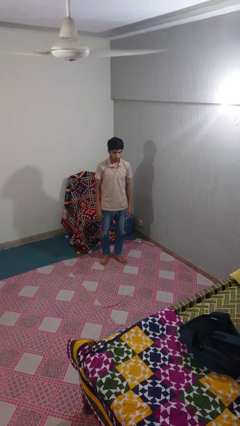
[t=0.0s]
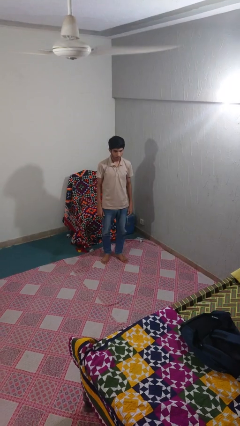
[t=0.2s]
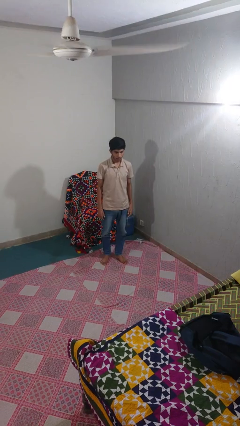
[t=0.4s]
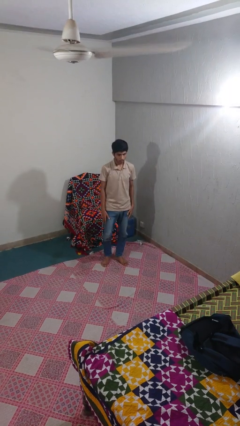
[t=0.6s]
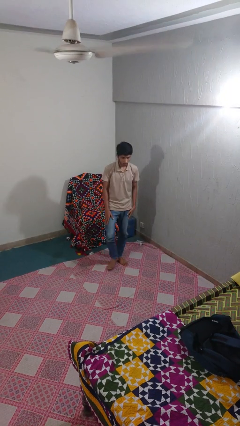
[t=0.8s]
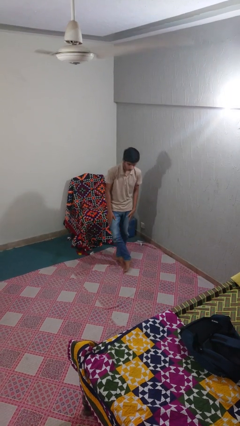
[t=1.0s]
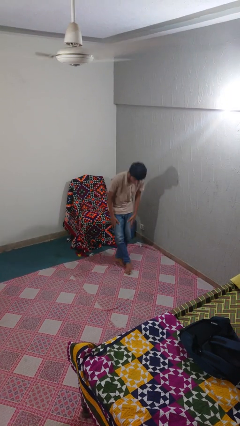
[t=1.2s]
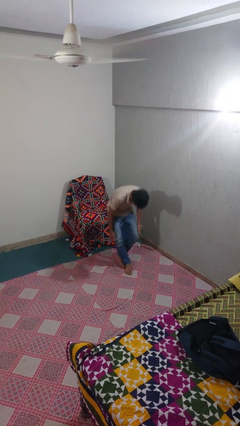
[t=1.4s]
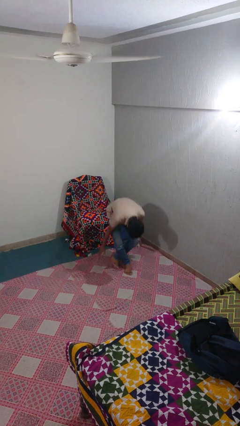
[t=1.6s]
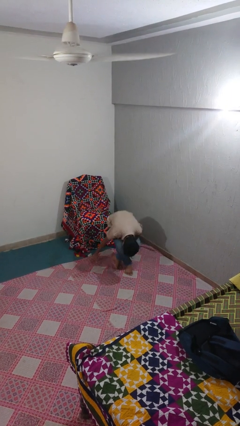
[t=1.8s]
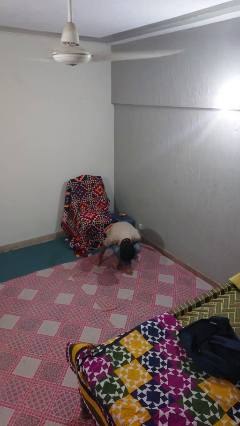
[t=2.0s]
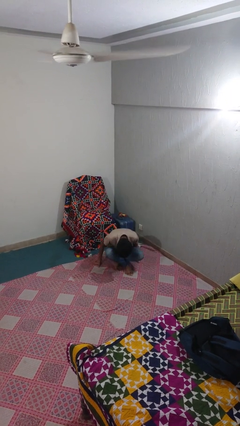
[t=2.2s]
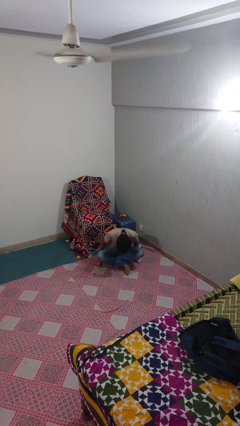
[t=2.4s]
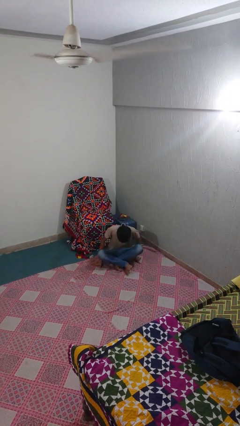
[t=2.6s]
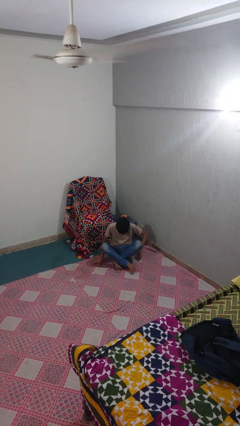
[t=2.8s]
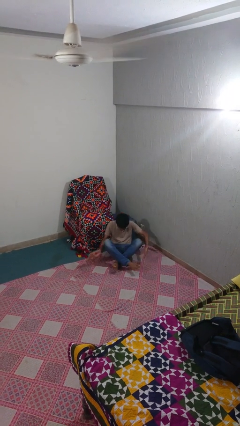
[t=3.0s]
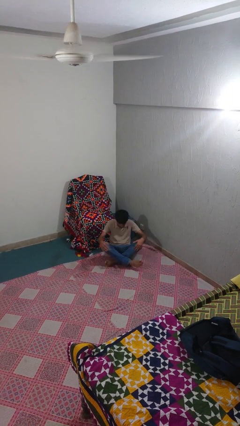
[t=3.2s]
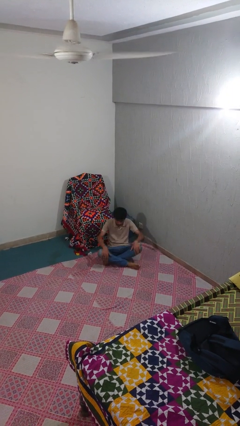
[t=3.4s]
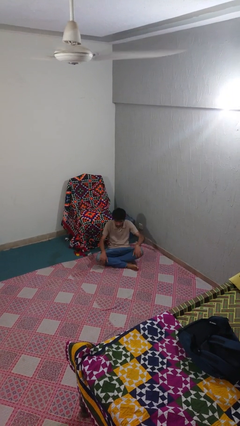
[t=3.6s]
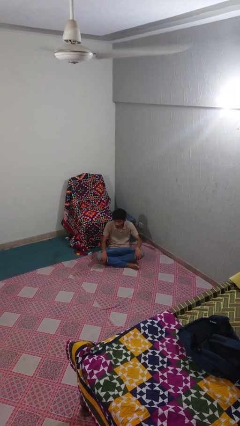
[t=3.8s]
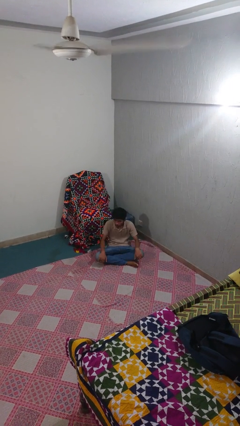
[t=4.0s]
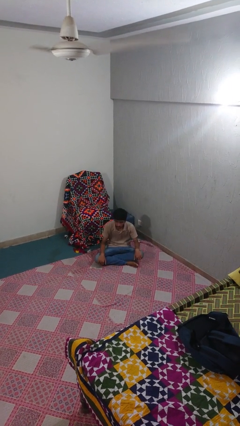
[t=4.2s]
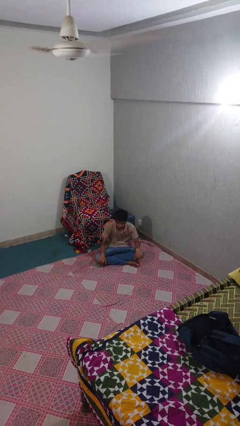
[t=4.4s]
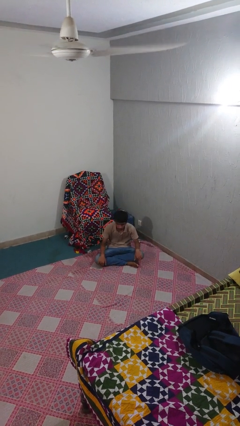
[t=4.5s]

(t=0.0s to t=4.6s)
person sits crisscross

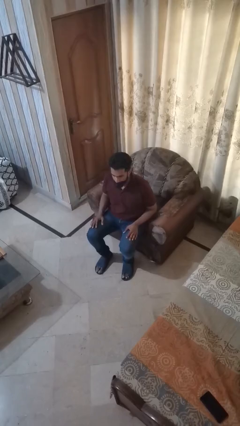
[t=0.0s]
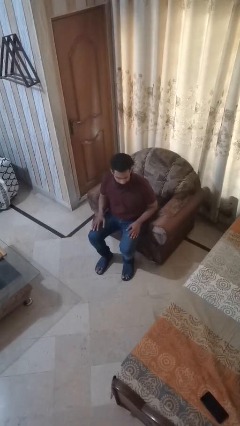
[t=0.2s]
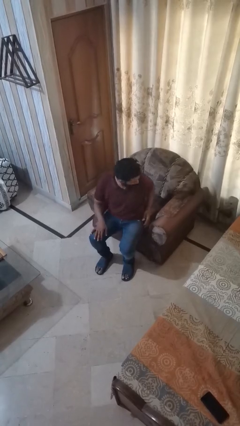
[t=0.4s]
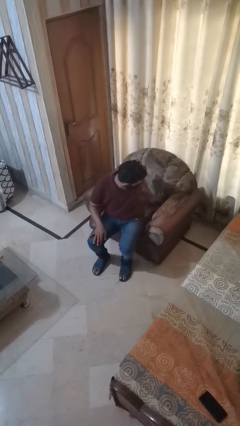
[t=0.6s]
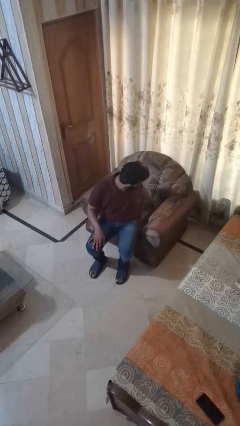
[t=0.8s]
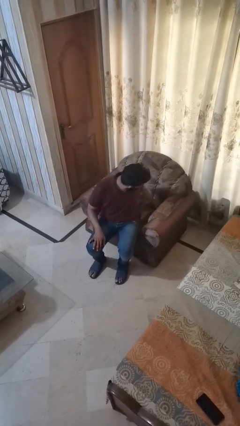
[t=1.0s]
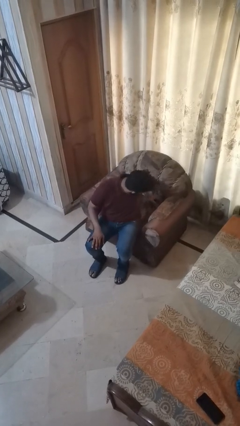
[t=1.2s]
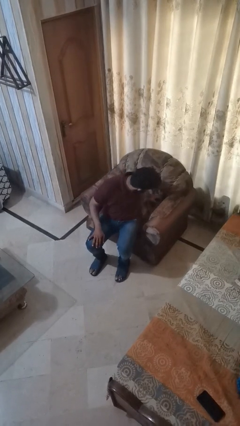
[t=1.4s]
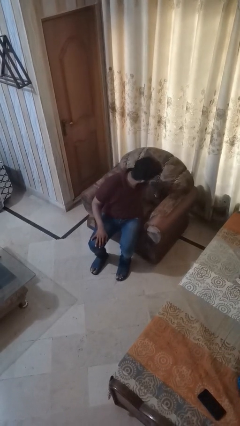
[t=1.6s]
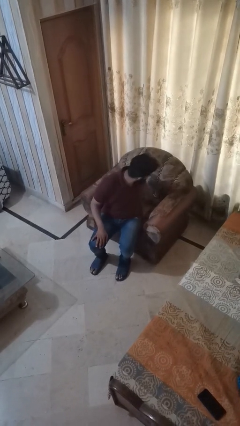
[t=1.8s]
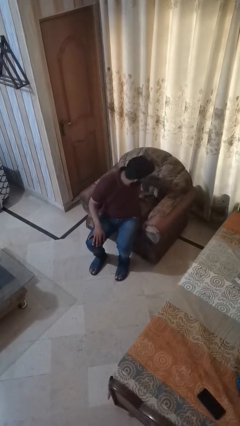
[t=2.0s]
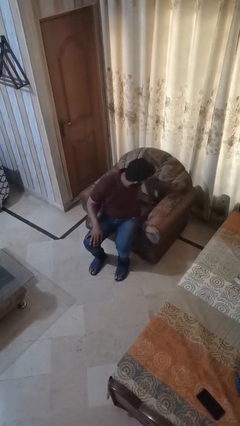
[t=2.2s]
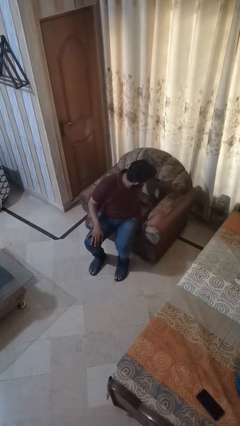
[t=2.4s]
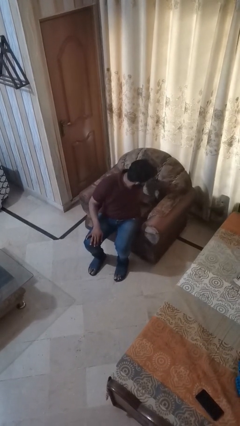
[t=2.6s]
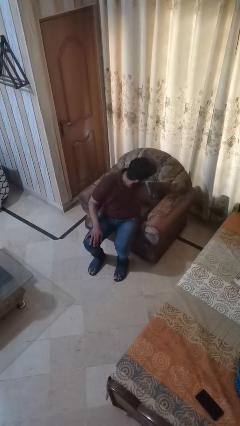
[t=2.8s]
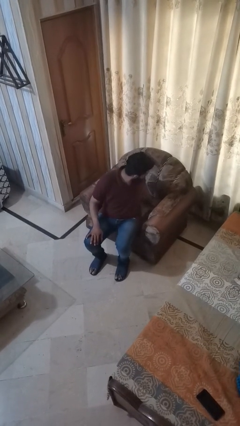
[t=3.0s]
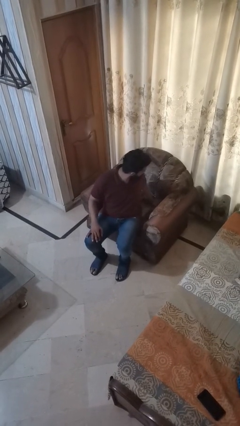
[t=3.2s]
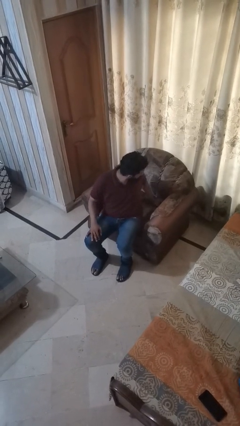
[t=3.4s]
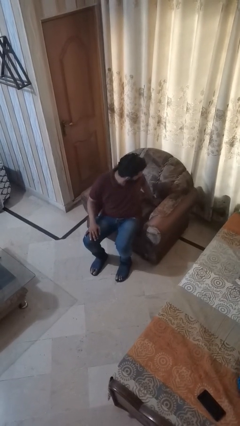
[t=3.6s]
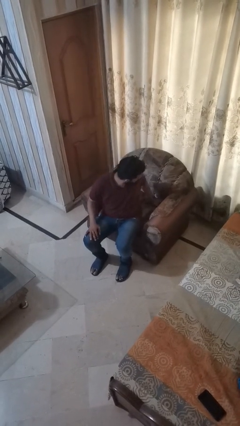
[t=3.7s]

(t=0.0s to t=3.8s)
person searches under couch

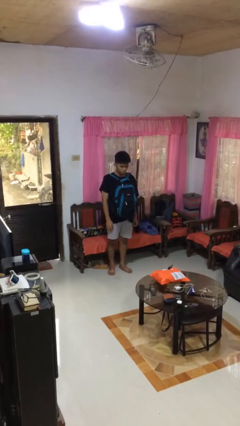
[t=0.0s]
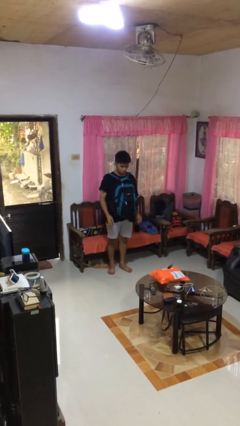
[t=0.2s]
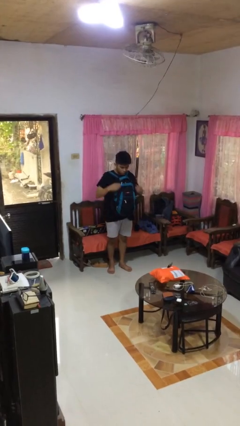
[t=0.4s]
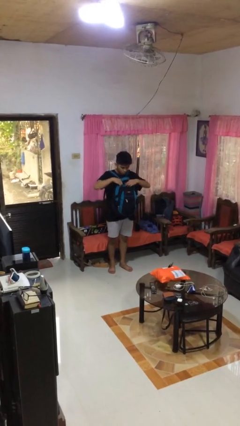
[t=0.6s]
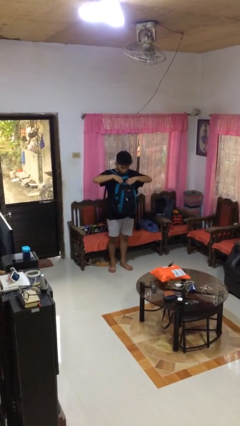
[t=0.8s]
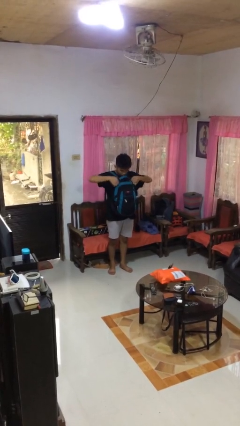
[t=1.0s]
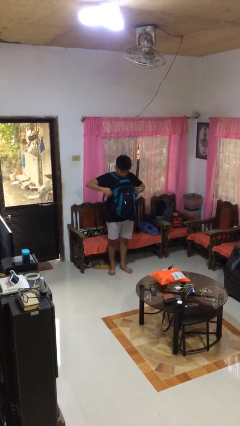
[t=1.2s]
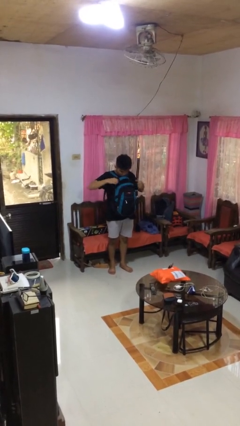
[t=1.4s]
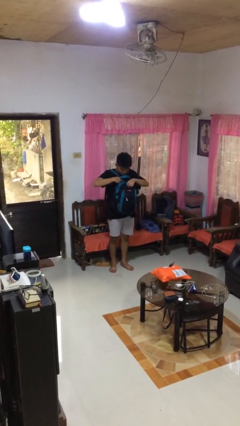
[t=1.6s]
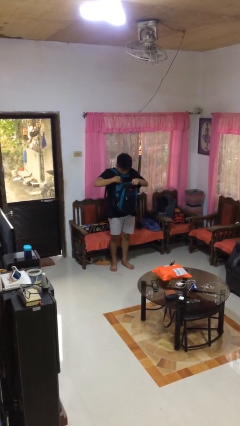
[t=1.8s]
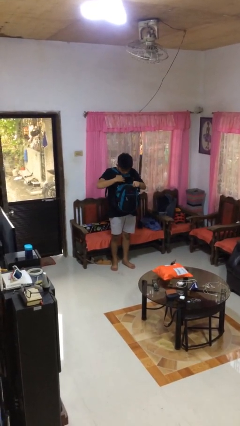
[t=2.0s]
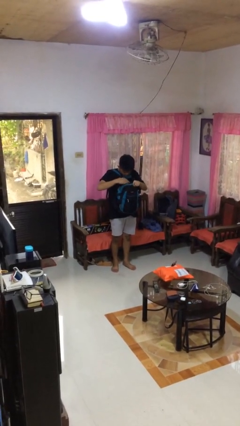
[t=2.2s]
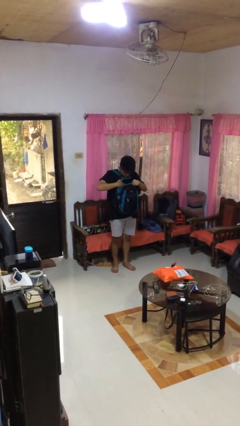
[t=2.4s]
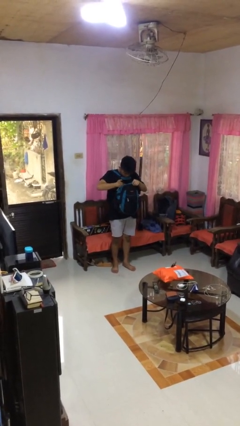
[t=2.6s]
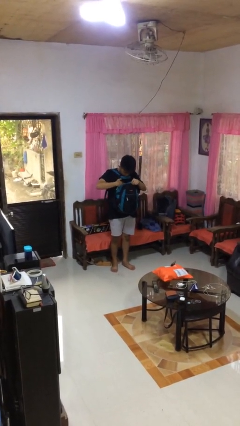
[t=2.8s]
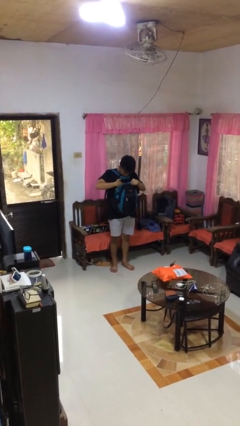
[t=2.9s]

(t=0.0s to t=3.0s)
person searches in backpack

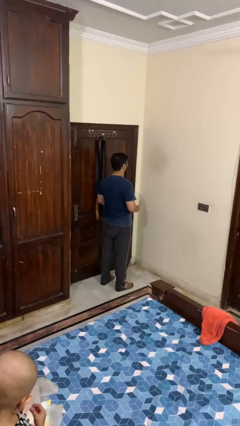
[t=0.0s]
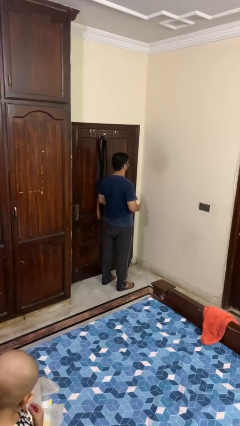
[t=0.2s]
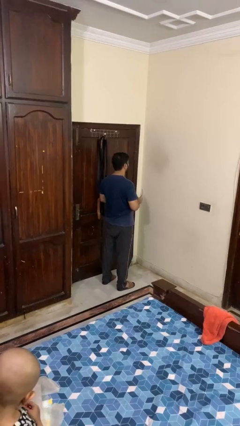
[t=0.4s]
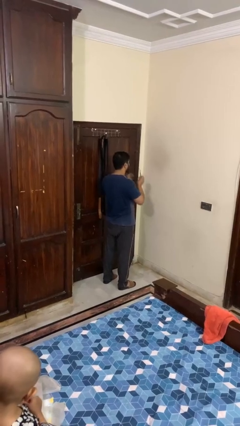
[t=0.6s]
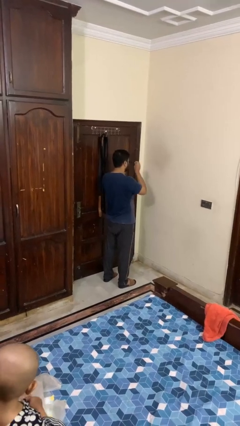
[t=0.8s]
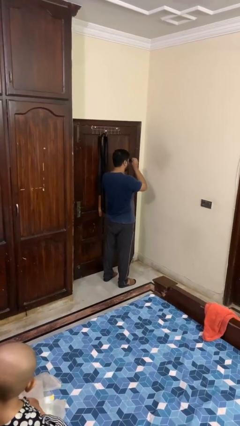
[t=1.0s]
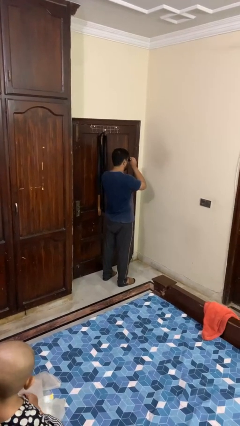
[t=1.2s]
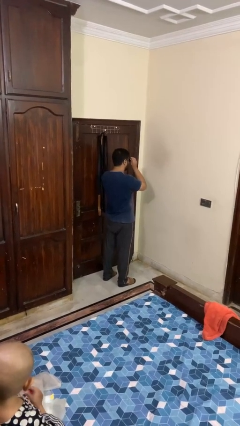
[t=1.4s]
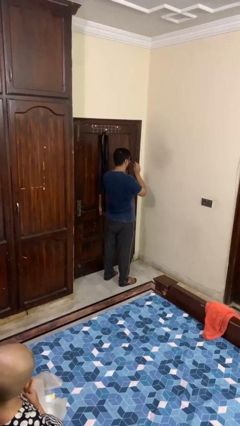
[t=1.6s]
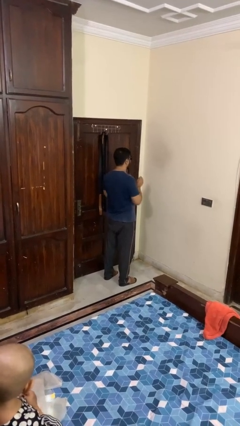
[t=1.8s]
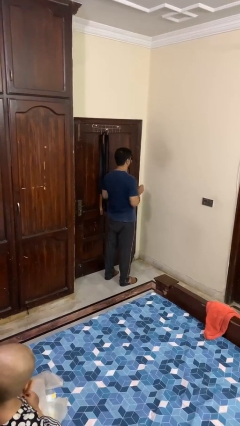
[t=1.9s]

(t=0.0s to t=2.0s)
person puts on sunglasses

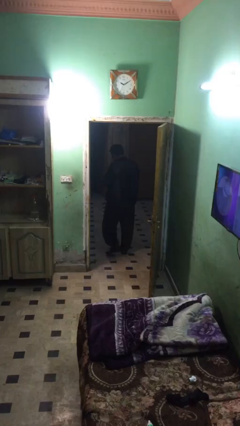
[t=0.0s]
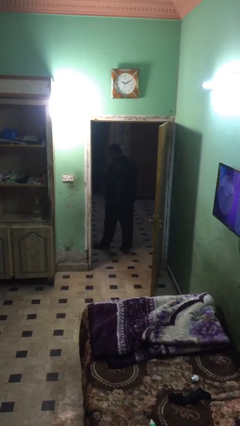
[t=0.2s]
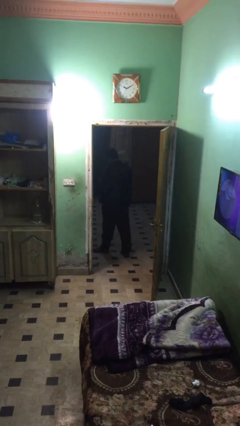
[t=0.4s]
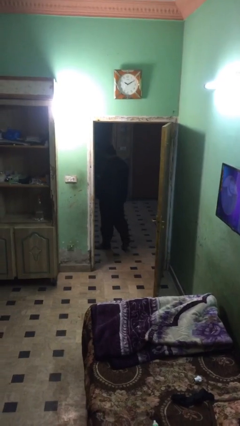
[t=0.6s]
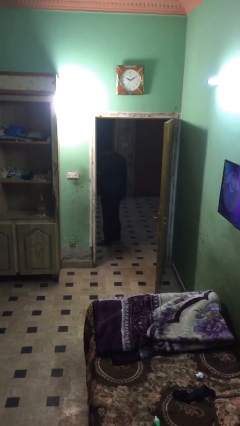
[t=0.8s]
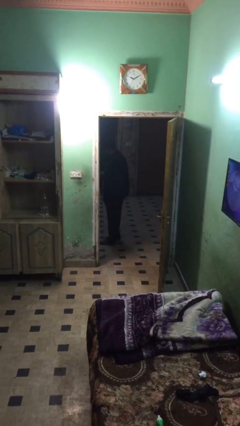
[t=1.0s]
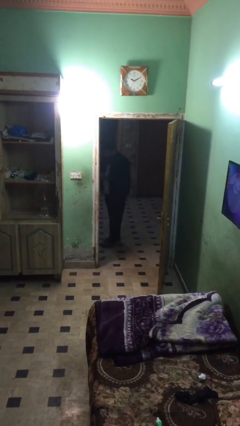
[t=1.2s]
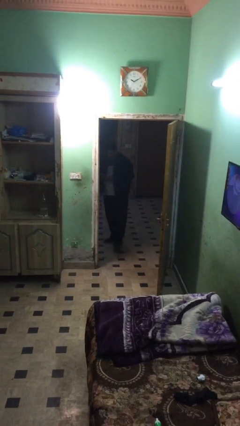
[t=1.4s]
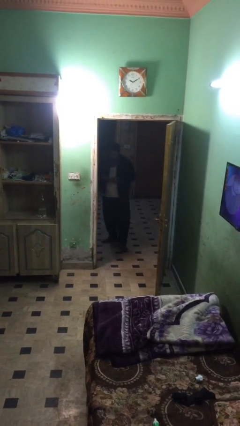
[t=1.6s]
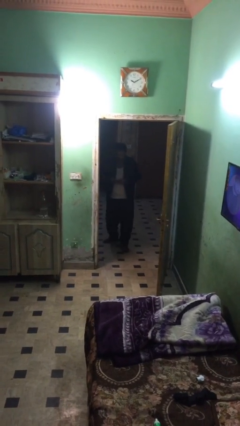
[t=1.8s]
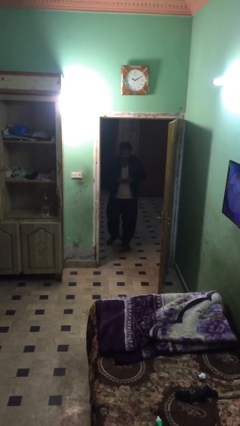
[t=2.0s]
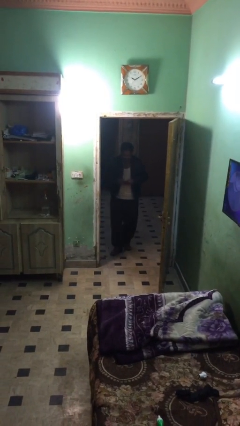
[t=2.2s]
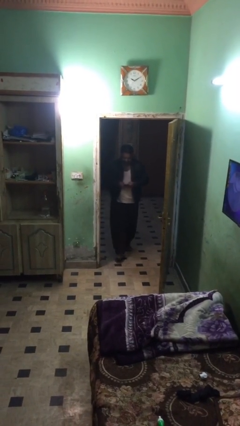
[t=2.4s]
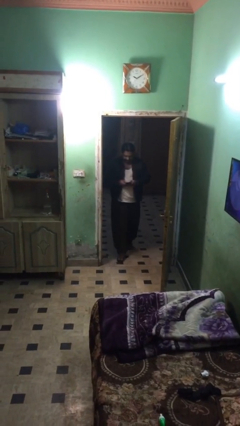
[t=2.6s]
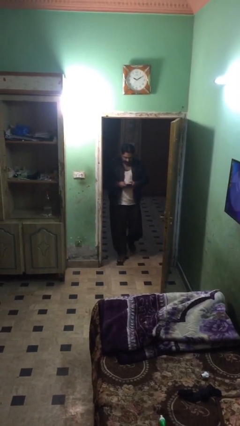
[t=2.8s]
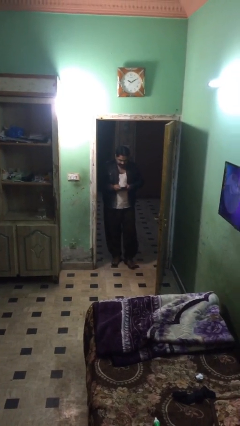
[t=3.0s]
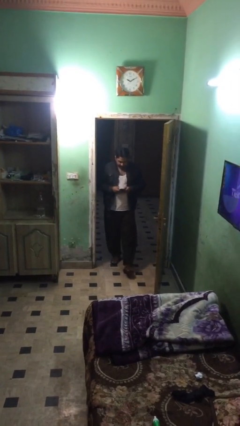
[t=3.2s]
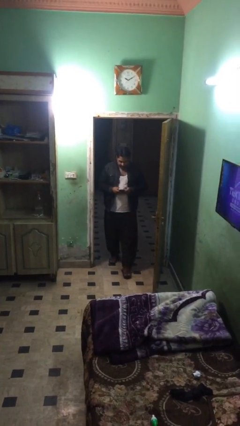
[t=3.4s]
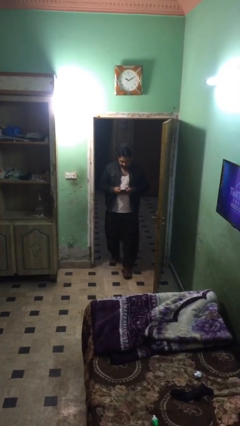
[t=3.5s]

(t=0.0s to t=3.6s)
person enters scene through structure

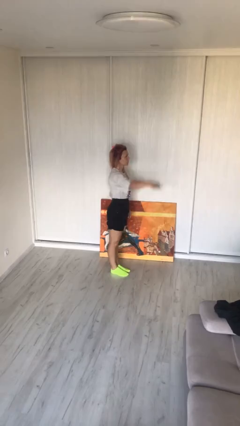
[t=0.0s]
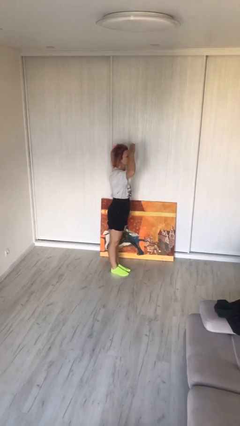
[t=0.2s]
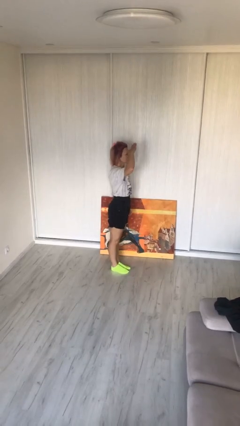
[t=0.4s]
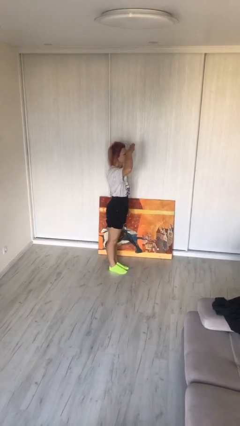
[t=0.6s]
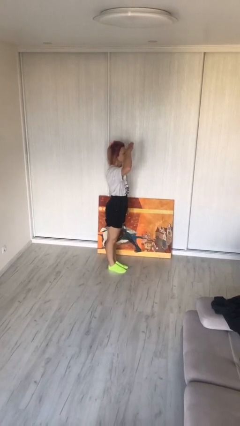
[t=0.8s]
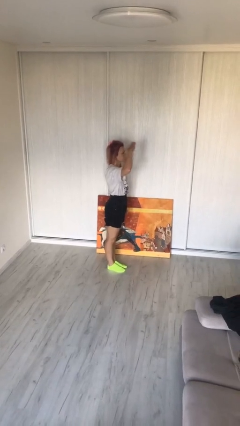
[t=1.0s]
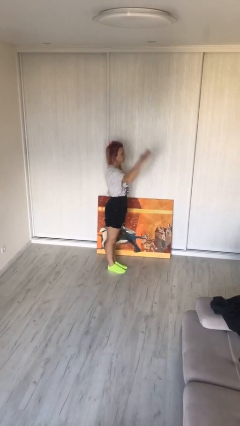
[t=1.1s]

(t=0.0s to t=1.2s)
person salutes
